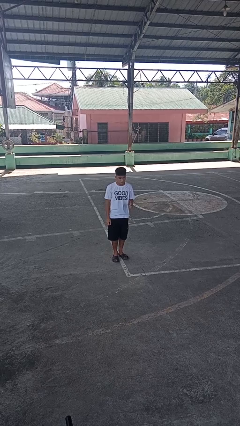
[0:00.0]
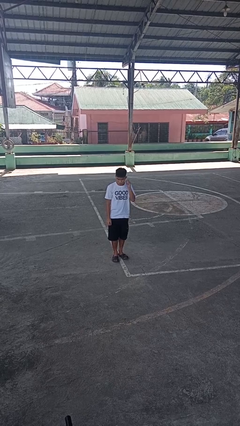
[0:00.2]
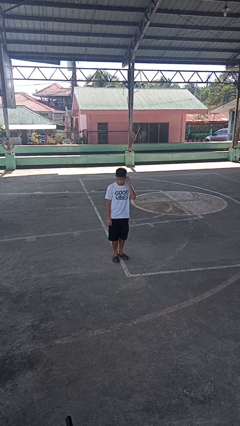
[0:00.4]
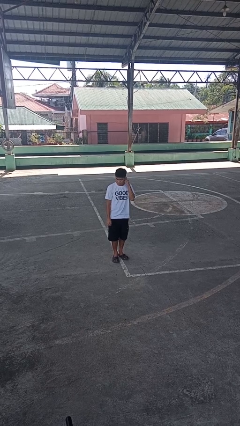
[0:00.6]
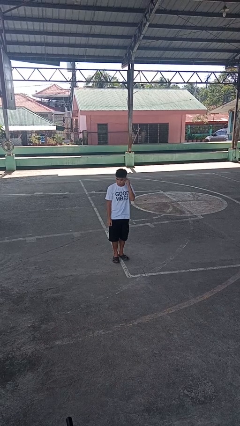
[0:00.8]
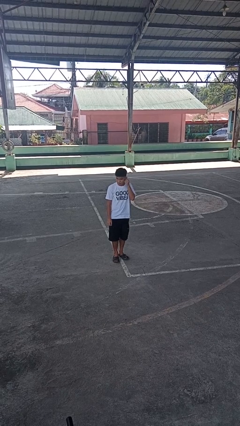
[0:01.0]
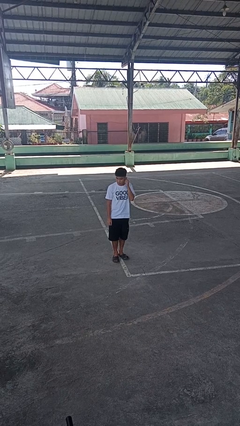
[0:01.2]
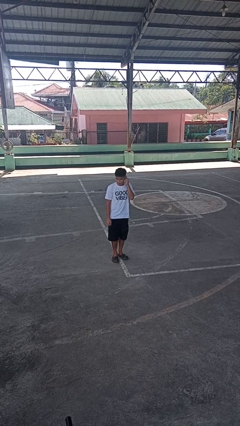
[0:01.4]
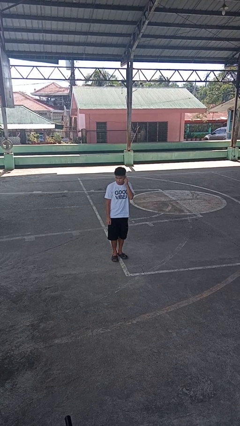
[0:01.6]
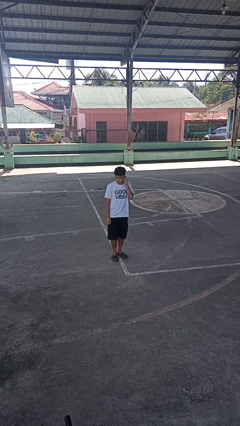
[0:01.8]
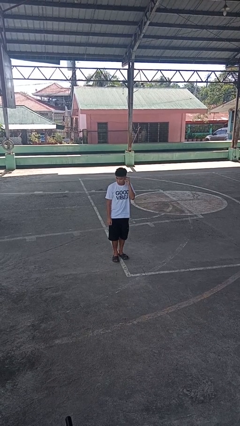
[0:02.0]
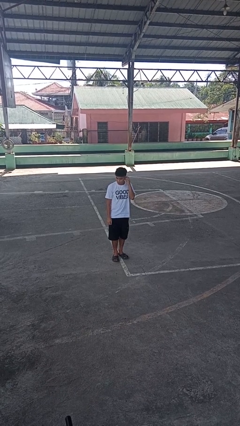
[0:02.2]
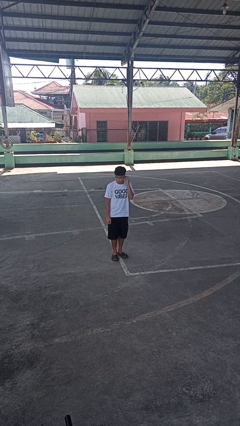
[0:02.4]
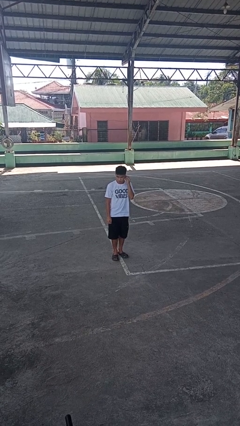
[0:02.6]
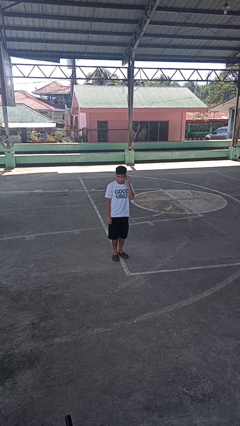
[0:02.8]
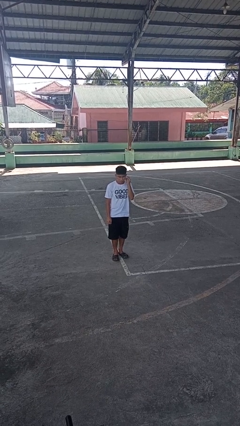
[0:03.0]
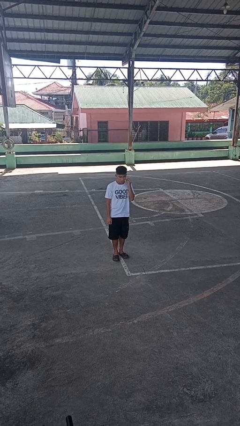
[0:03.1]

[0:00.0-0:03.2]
person touches earlobe

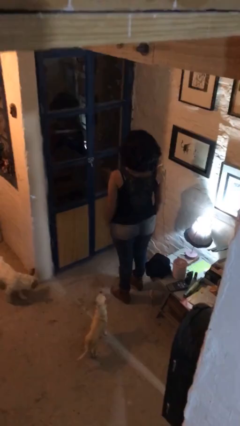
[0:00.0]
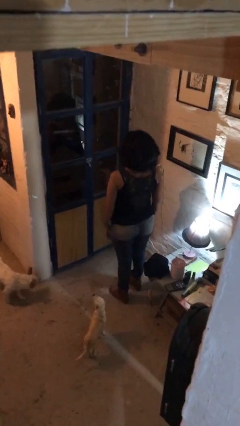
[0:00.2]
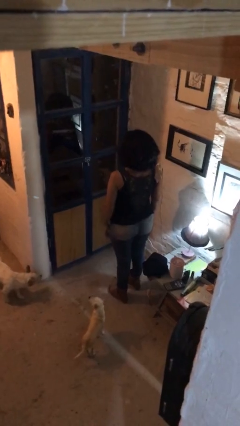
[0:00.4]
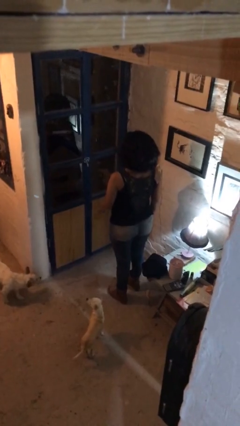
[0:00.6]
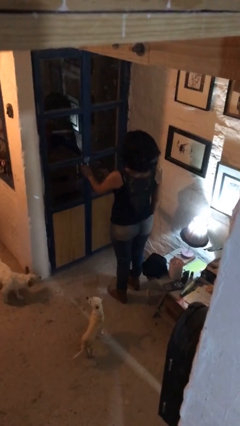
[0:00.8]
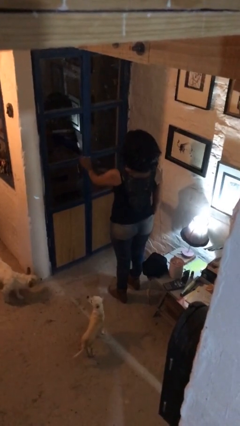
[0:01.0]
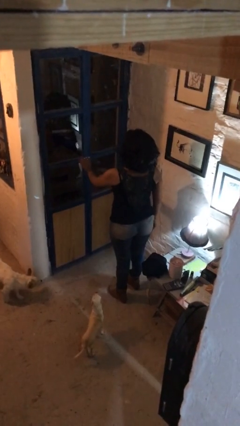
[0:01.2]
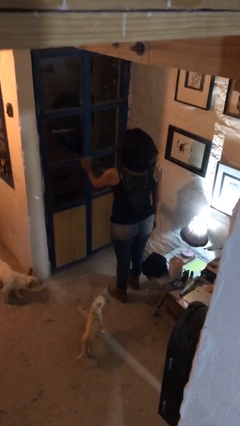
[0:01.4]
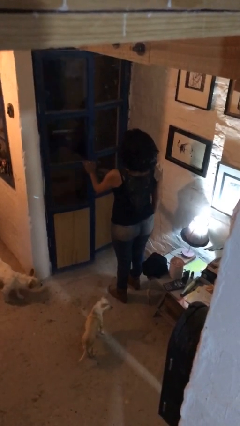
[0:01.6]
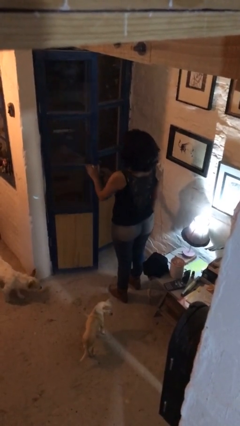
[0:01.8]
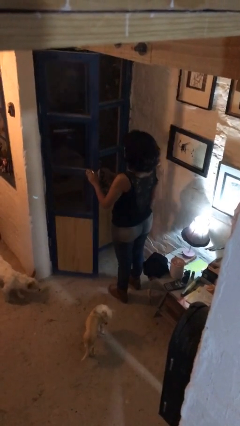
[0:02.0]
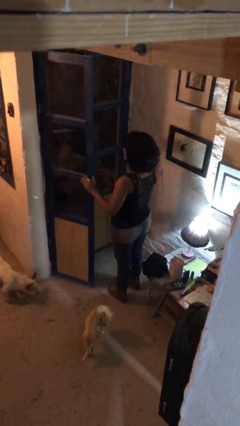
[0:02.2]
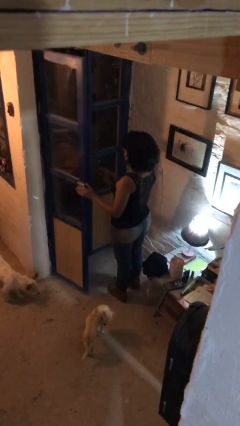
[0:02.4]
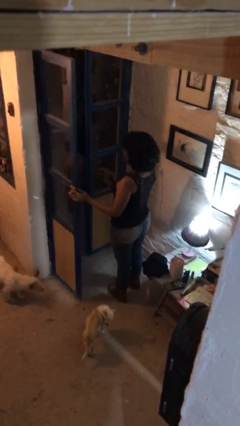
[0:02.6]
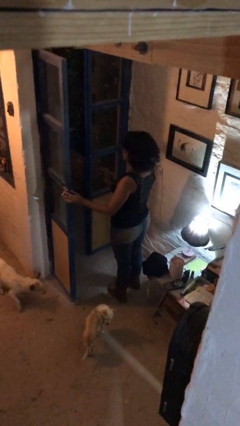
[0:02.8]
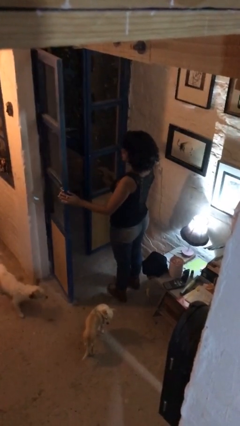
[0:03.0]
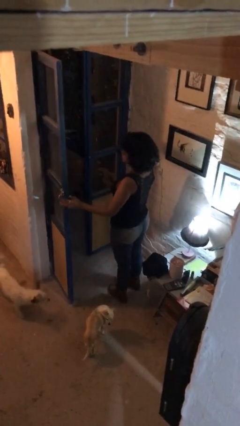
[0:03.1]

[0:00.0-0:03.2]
person opens facility door

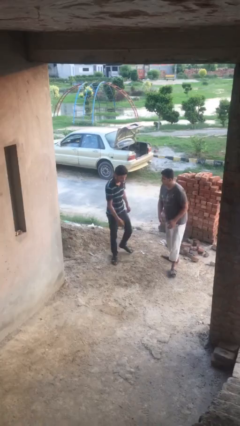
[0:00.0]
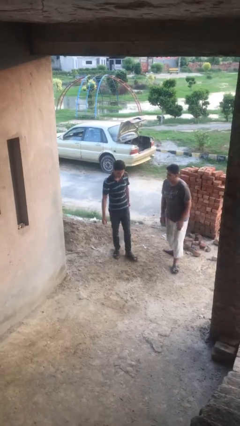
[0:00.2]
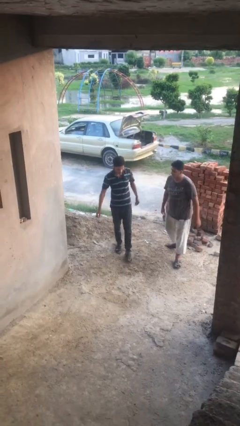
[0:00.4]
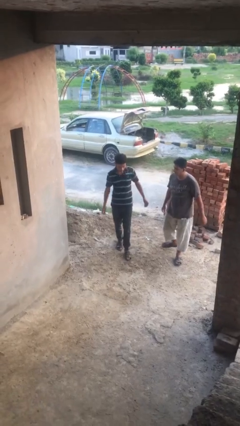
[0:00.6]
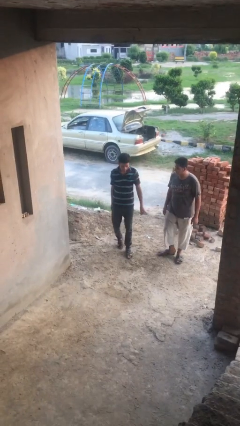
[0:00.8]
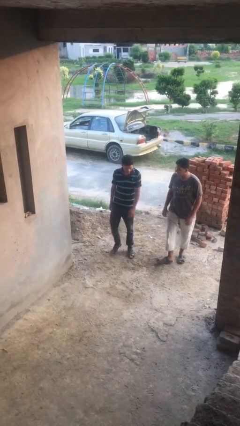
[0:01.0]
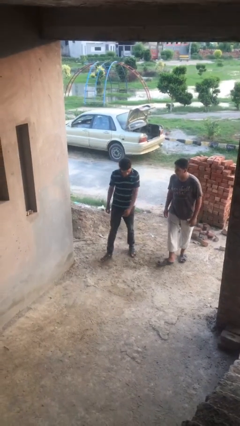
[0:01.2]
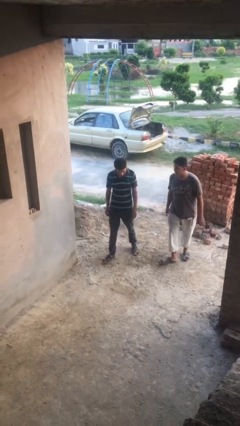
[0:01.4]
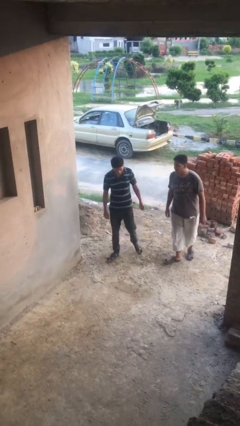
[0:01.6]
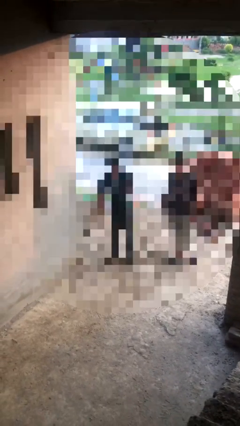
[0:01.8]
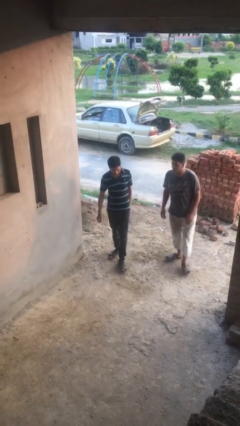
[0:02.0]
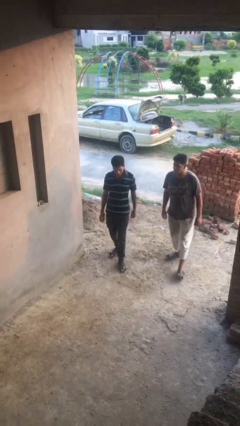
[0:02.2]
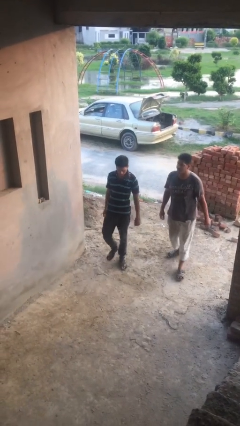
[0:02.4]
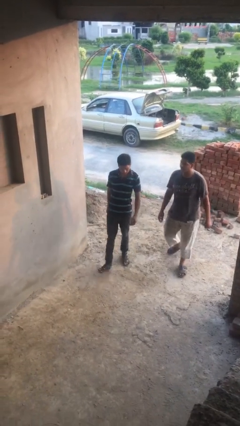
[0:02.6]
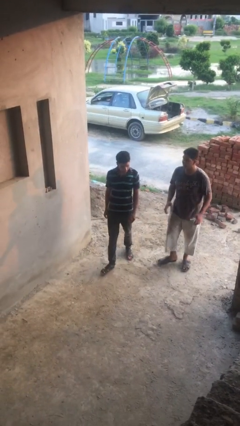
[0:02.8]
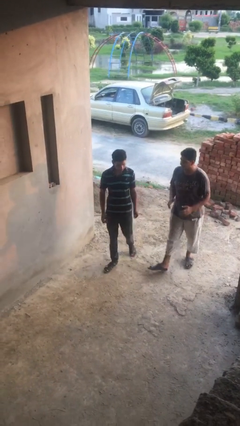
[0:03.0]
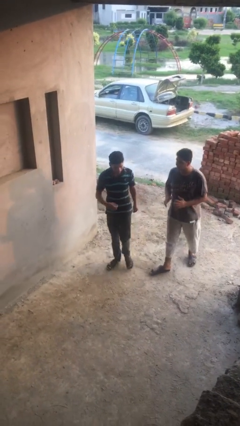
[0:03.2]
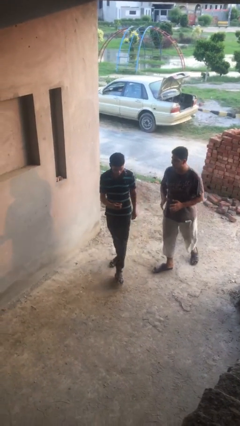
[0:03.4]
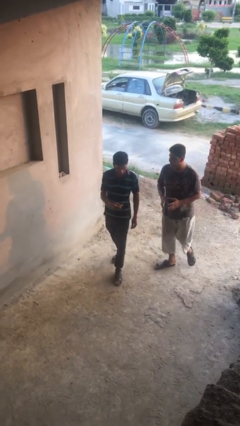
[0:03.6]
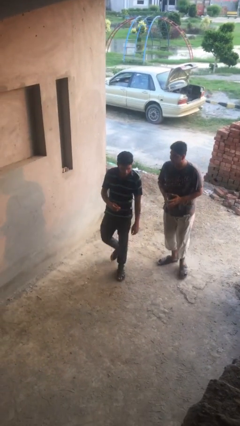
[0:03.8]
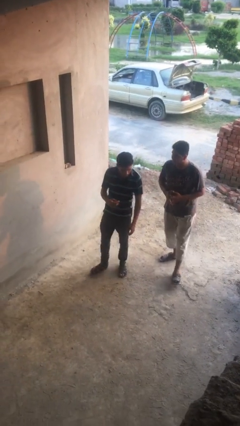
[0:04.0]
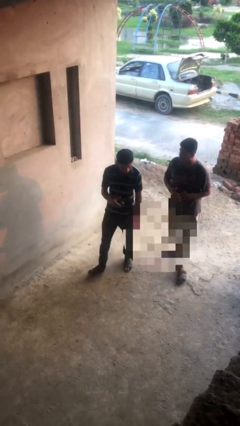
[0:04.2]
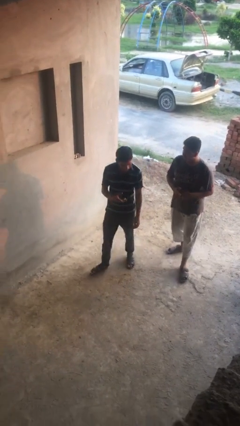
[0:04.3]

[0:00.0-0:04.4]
person talks to person

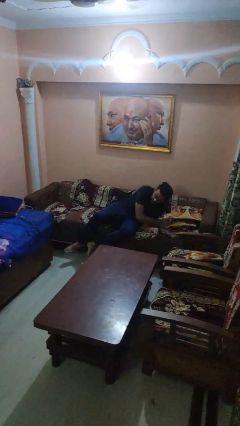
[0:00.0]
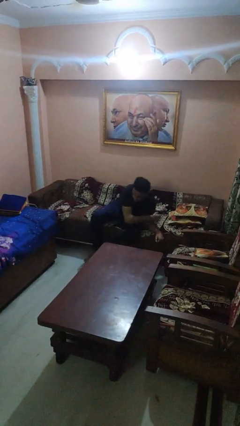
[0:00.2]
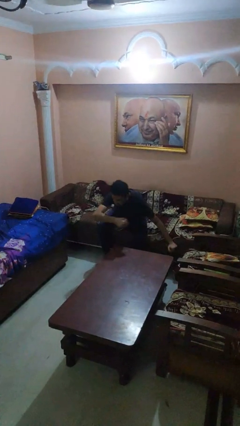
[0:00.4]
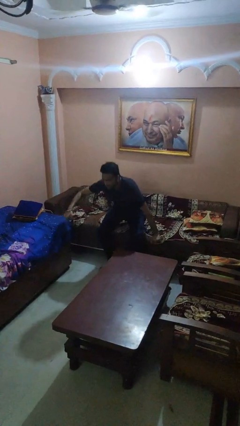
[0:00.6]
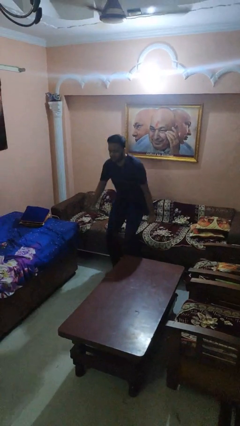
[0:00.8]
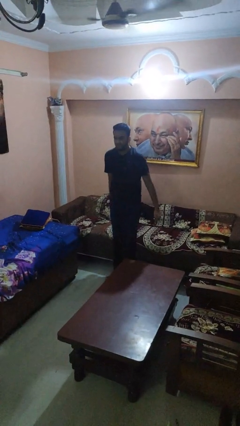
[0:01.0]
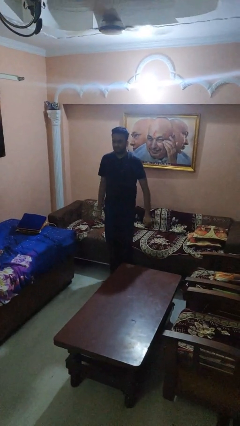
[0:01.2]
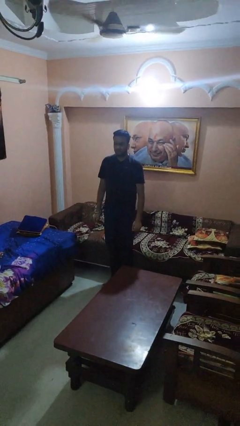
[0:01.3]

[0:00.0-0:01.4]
person stands up

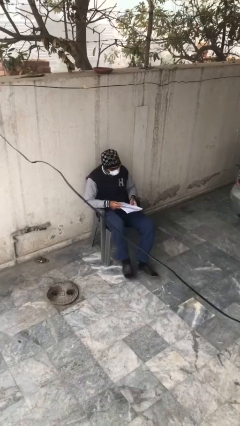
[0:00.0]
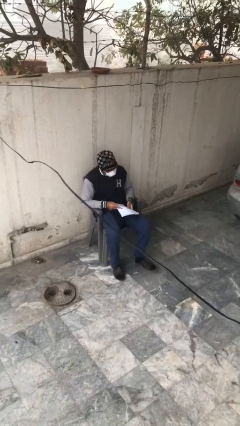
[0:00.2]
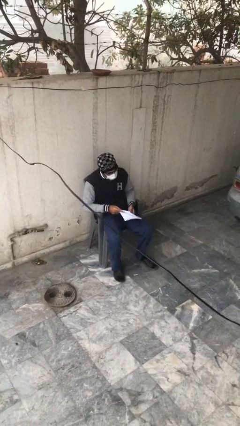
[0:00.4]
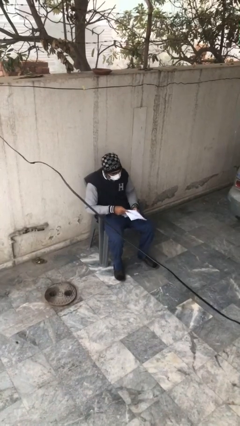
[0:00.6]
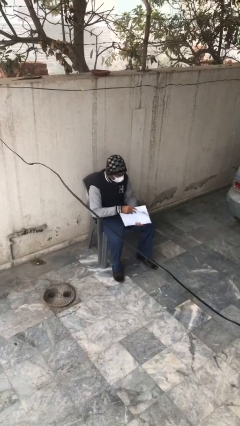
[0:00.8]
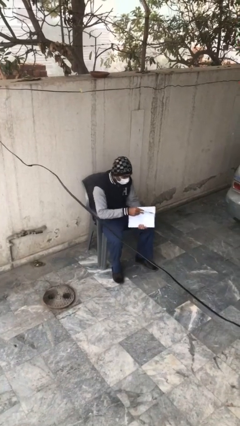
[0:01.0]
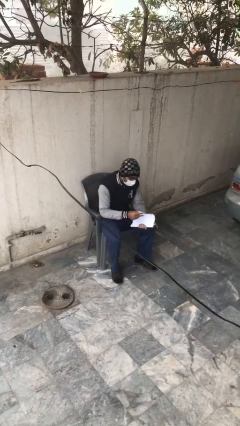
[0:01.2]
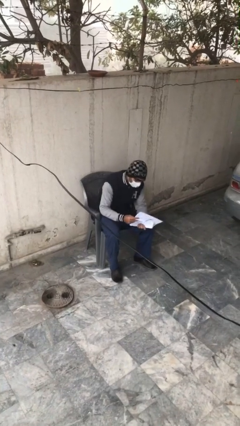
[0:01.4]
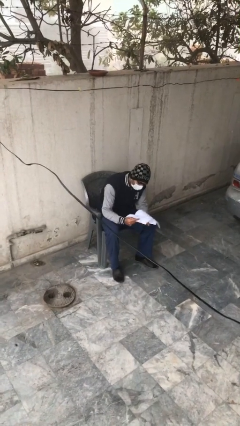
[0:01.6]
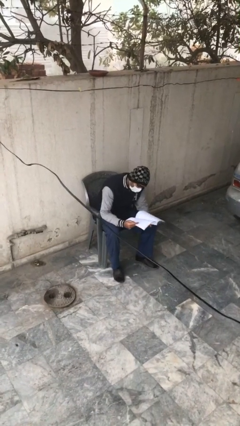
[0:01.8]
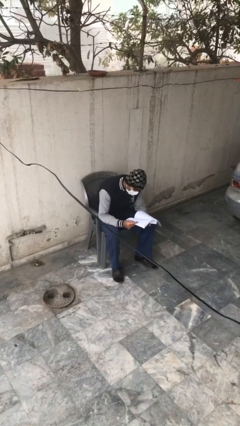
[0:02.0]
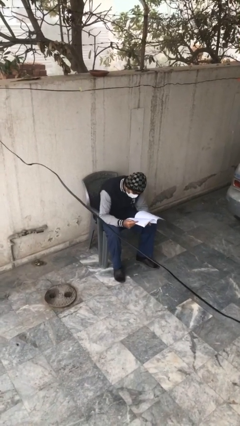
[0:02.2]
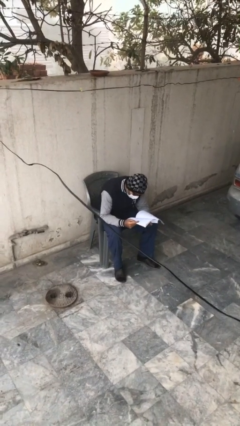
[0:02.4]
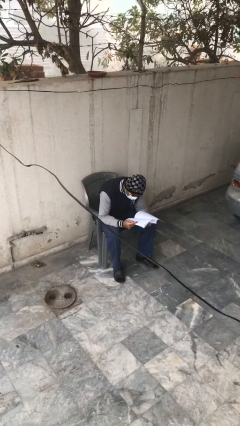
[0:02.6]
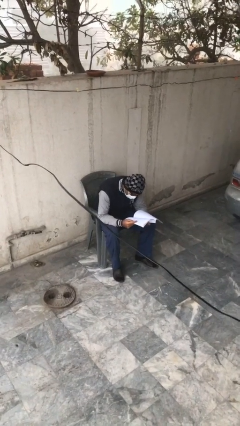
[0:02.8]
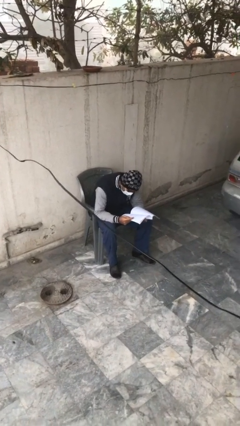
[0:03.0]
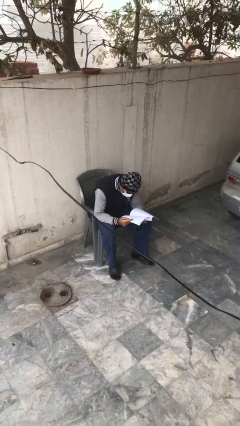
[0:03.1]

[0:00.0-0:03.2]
person reads document

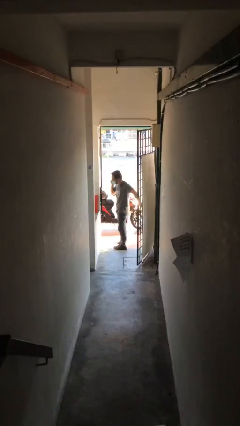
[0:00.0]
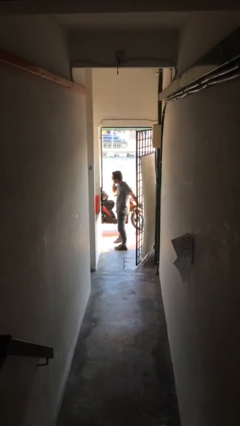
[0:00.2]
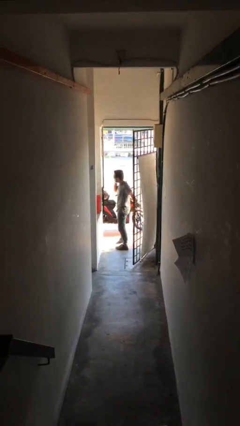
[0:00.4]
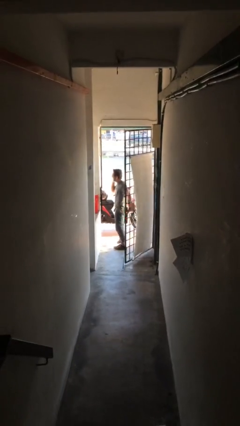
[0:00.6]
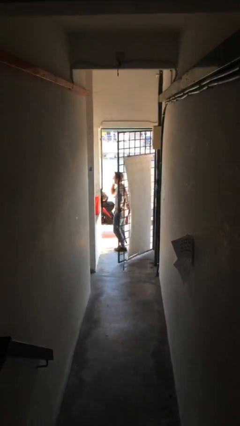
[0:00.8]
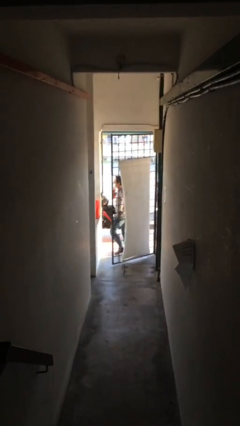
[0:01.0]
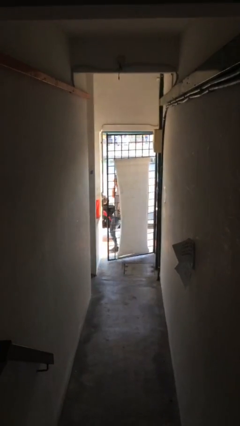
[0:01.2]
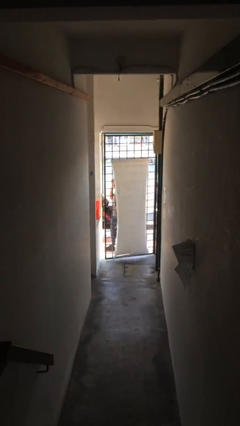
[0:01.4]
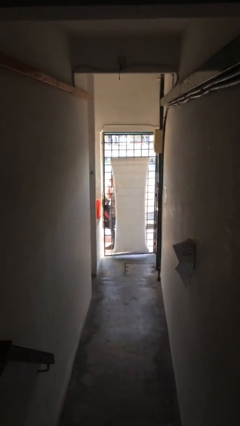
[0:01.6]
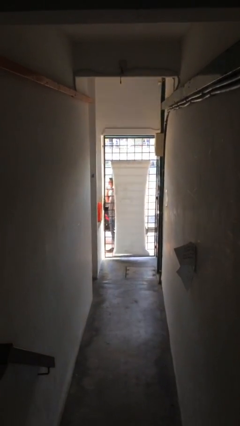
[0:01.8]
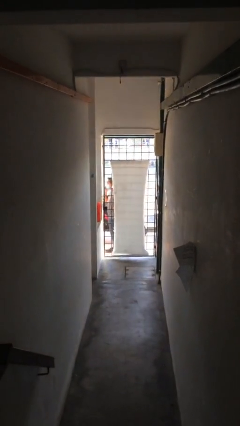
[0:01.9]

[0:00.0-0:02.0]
person closes facility door
